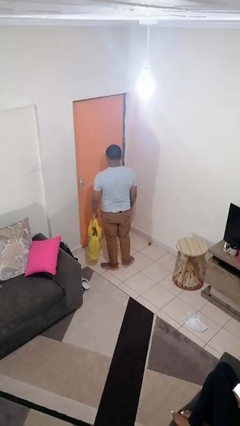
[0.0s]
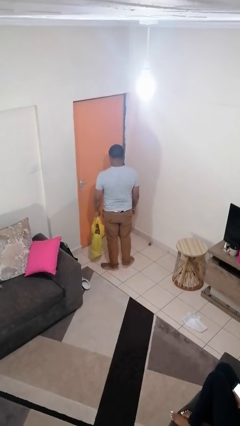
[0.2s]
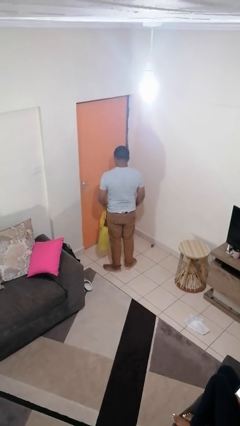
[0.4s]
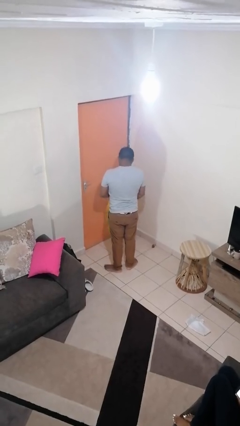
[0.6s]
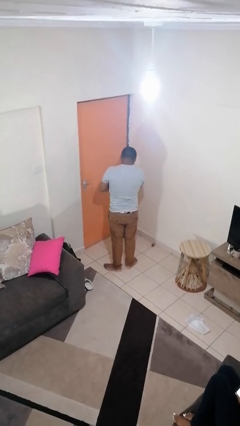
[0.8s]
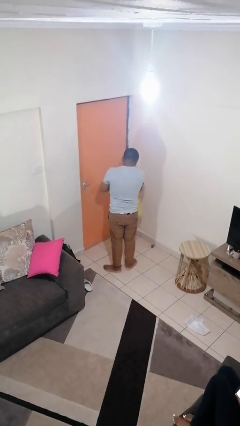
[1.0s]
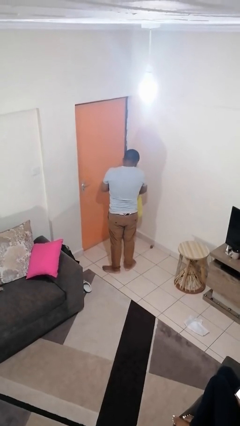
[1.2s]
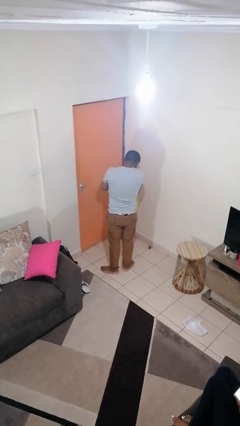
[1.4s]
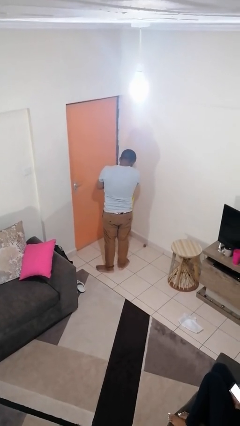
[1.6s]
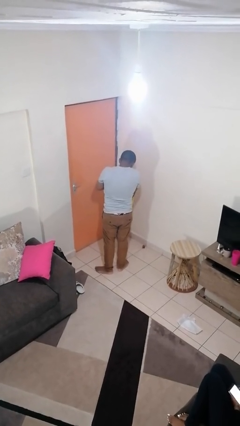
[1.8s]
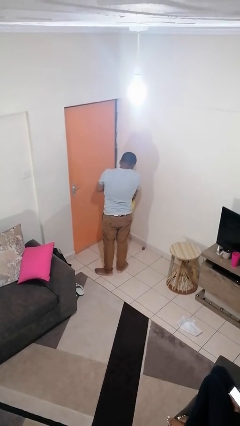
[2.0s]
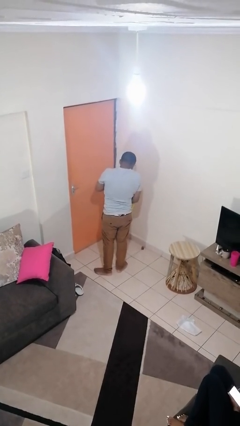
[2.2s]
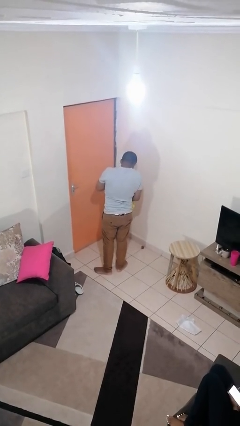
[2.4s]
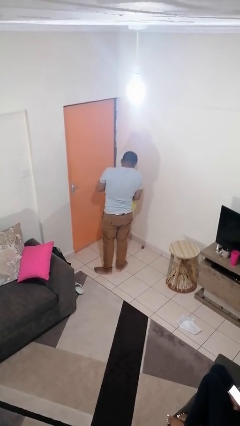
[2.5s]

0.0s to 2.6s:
person searches in bag

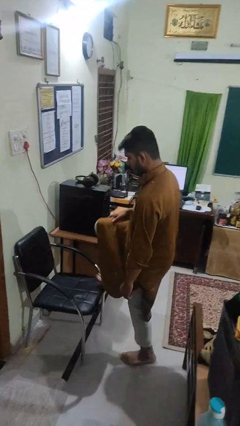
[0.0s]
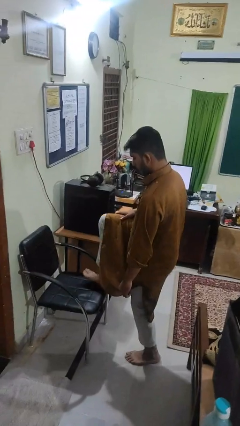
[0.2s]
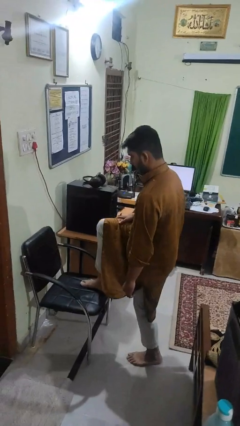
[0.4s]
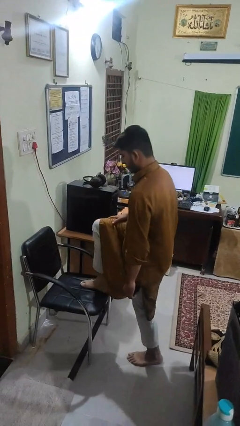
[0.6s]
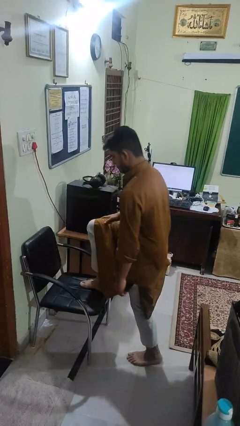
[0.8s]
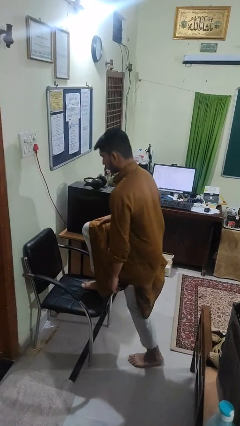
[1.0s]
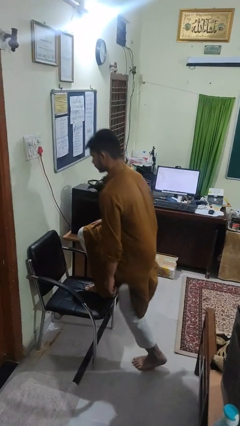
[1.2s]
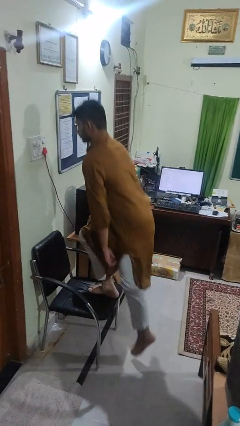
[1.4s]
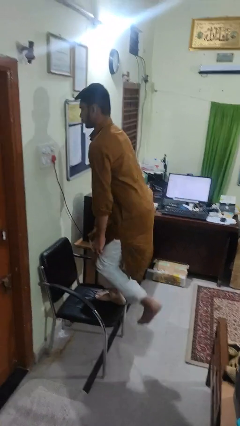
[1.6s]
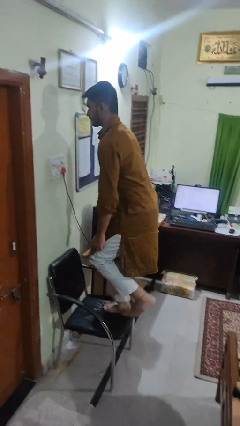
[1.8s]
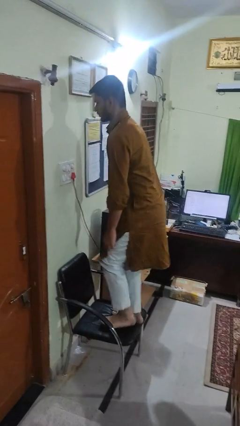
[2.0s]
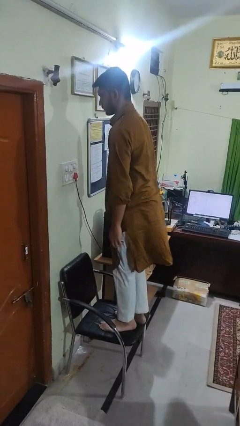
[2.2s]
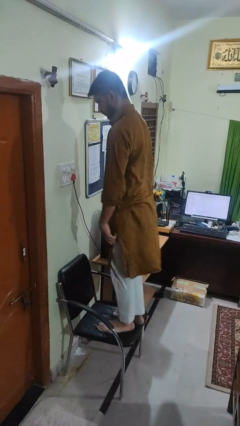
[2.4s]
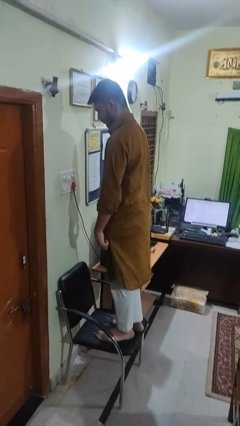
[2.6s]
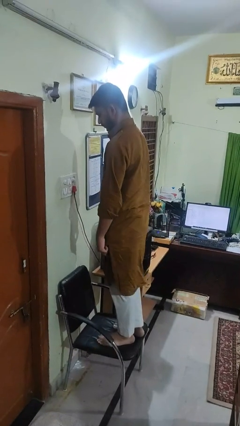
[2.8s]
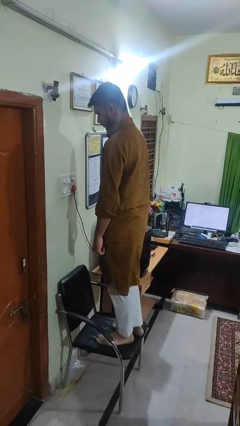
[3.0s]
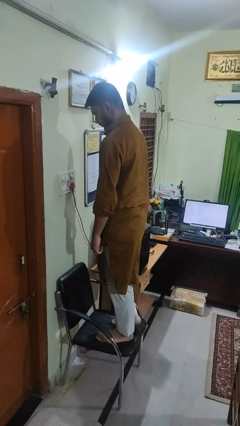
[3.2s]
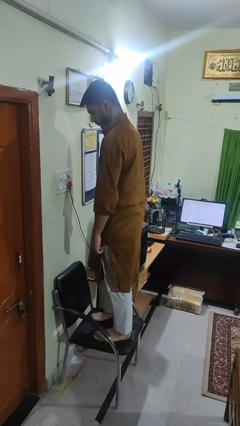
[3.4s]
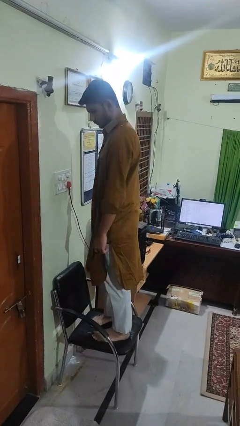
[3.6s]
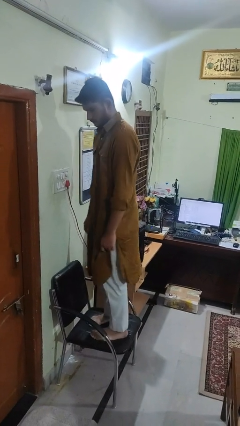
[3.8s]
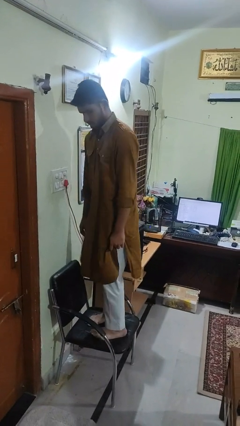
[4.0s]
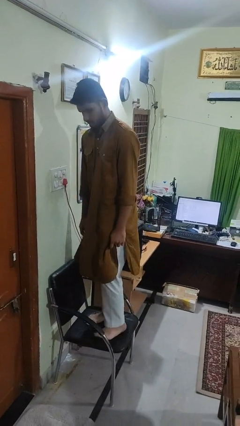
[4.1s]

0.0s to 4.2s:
person climbs on chair

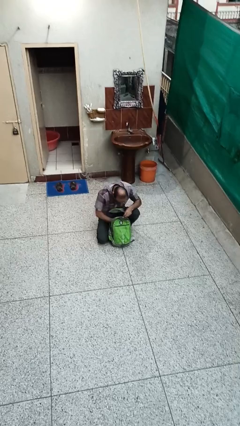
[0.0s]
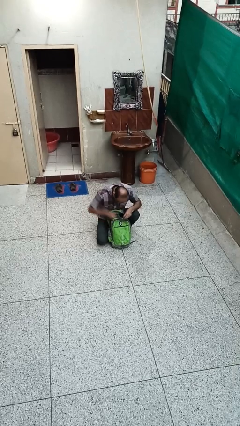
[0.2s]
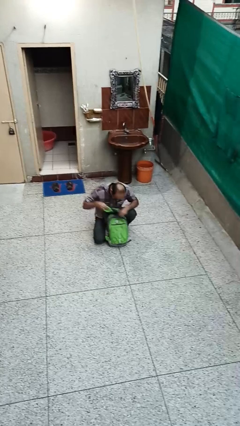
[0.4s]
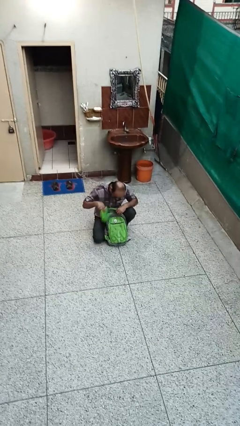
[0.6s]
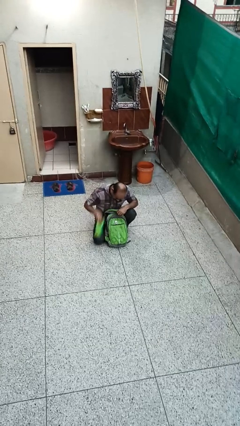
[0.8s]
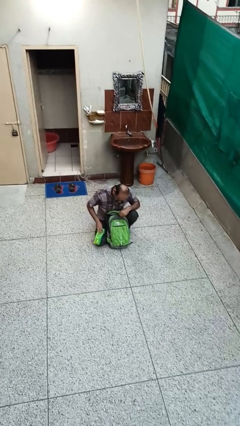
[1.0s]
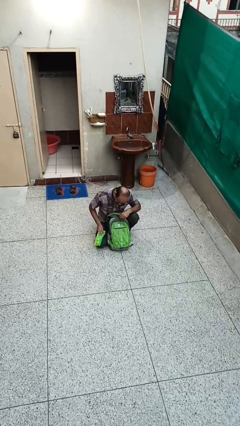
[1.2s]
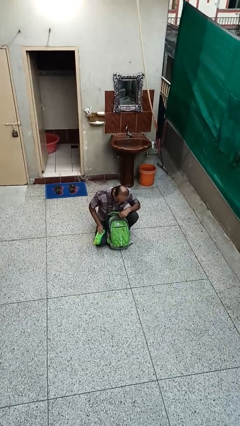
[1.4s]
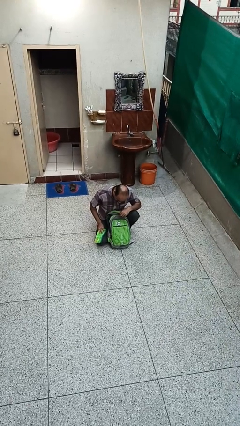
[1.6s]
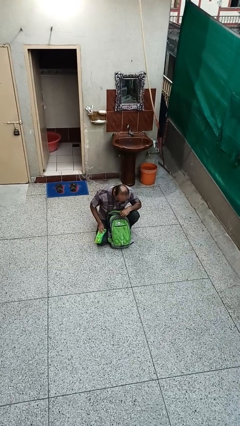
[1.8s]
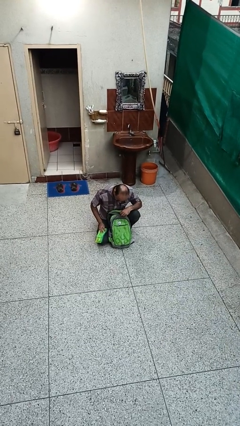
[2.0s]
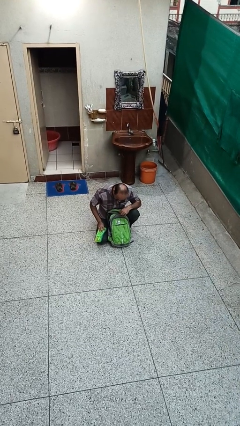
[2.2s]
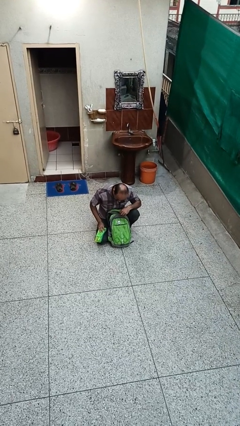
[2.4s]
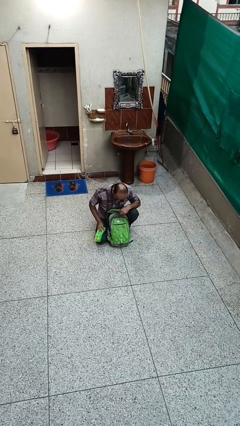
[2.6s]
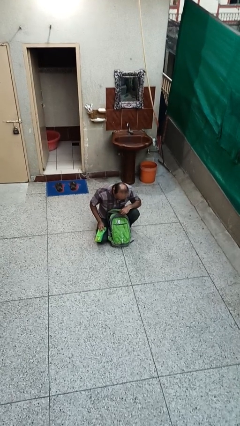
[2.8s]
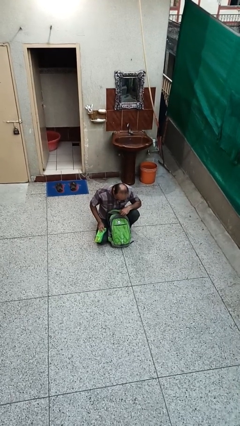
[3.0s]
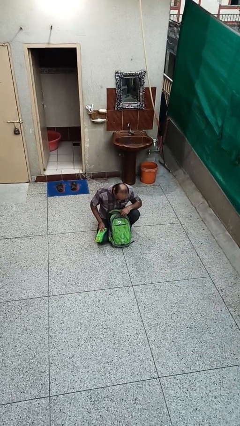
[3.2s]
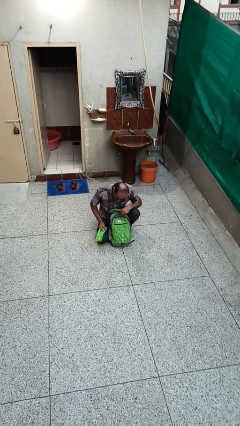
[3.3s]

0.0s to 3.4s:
person takes object from backpack

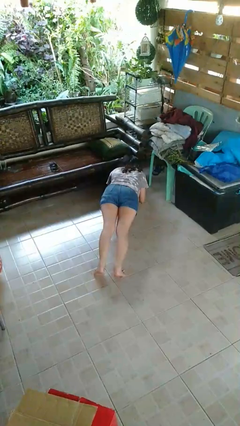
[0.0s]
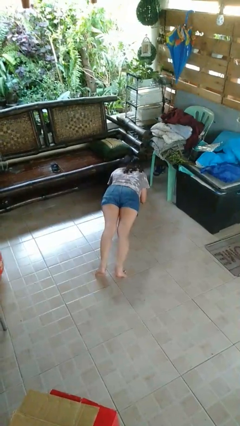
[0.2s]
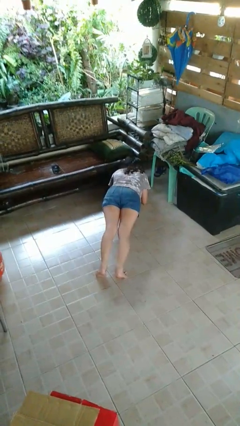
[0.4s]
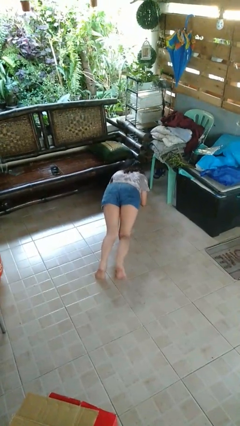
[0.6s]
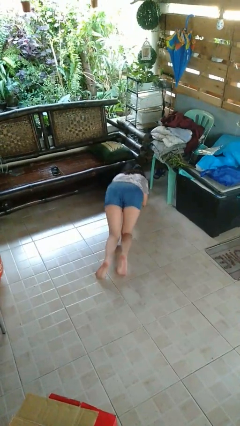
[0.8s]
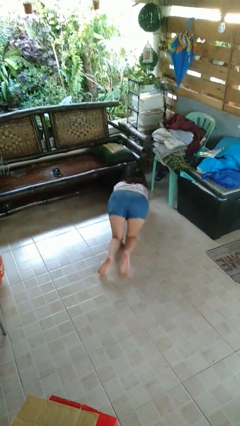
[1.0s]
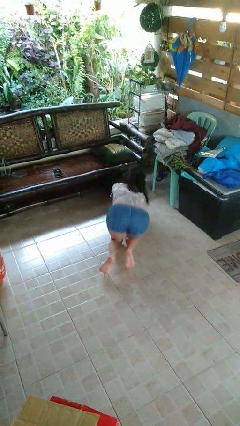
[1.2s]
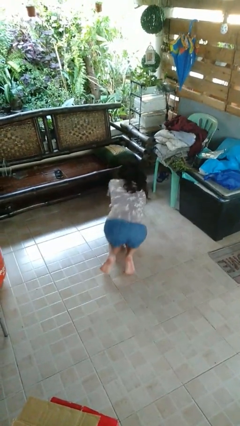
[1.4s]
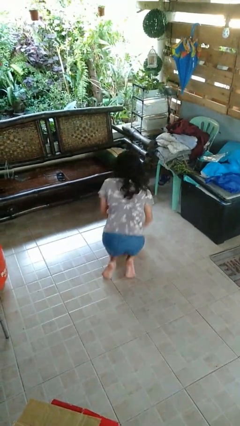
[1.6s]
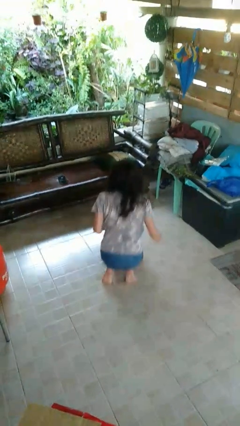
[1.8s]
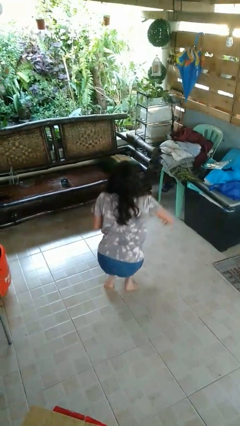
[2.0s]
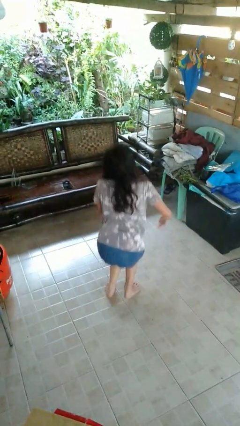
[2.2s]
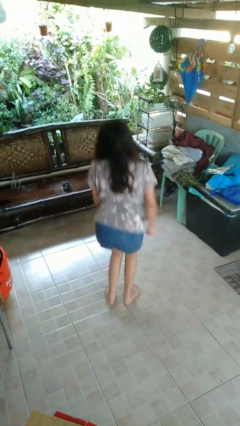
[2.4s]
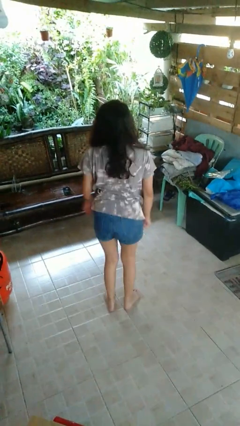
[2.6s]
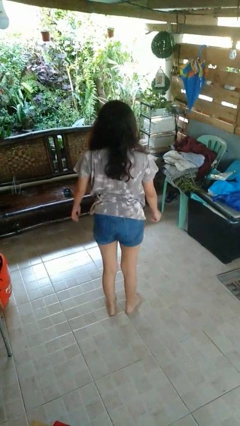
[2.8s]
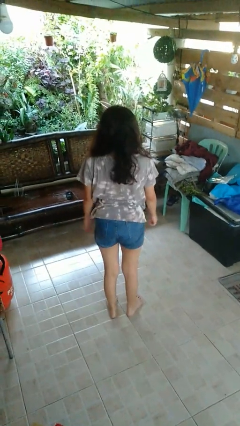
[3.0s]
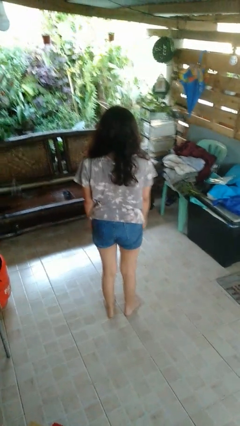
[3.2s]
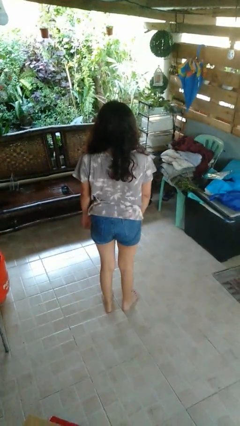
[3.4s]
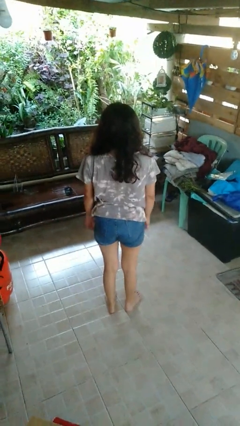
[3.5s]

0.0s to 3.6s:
person stands up from floor

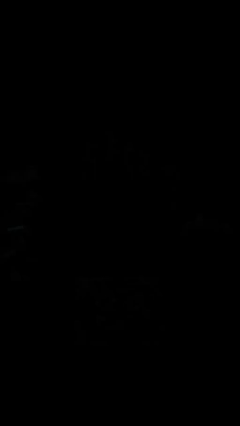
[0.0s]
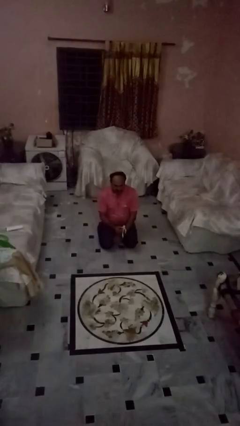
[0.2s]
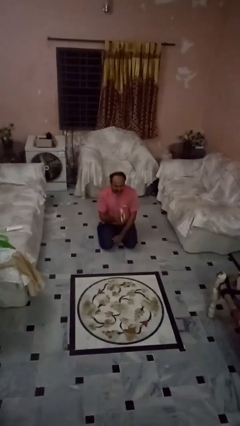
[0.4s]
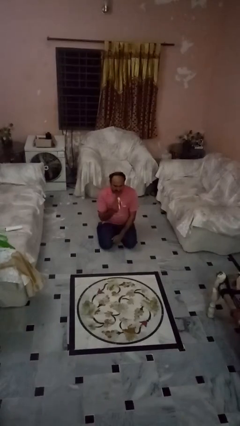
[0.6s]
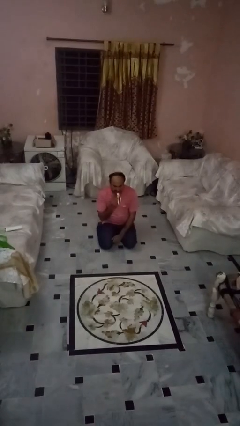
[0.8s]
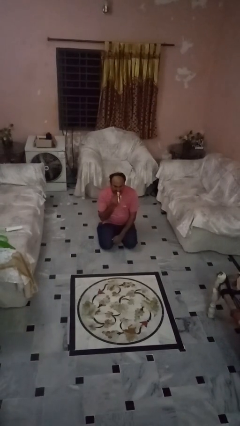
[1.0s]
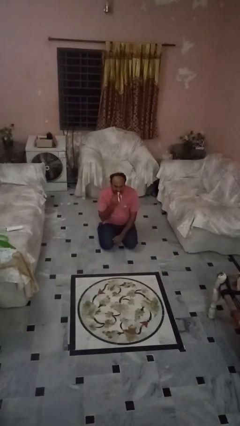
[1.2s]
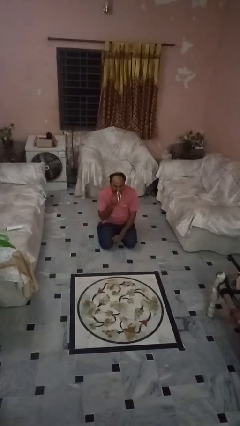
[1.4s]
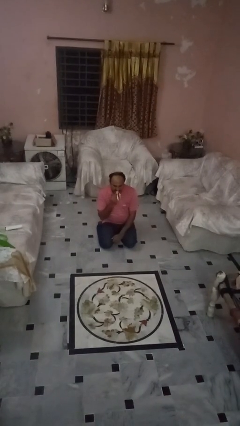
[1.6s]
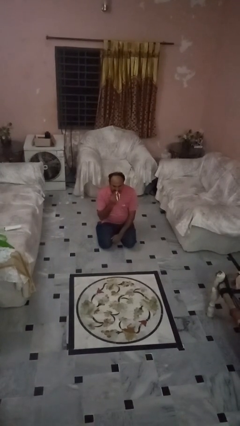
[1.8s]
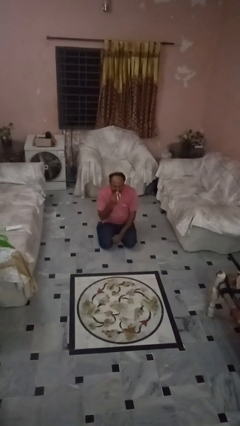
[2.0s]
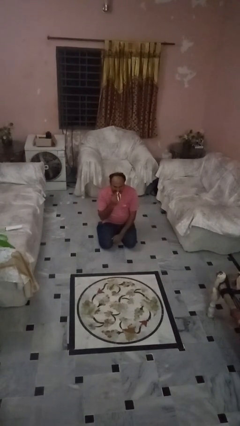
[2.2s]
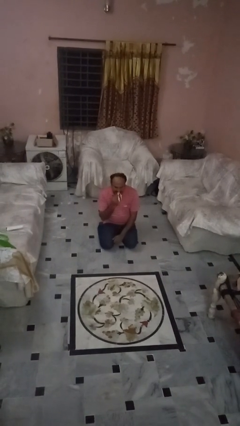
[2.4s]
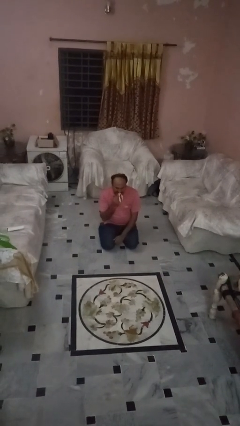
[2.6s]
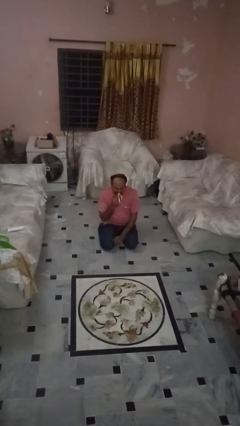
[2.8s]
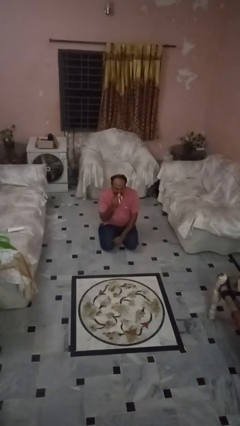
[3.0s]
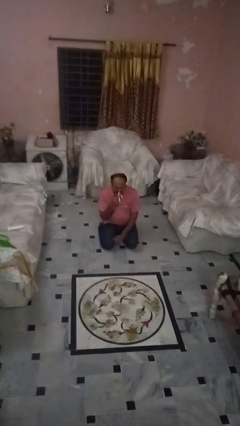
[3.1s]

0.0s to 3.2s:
person eats banana

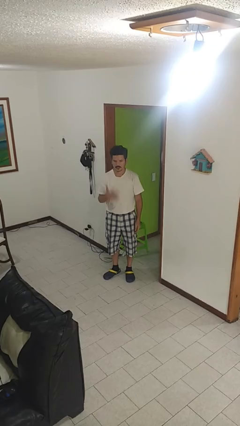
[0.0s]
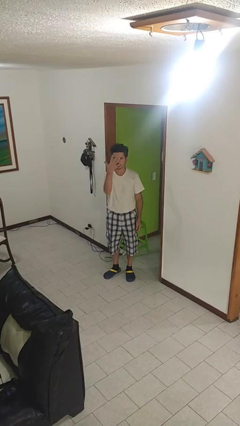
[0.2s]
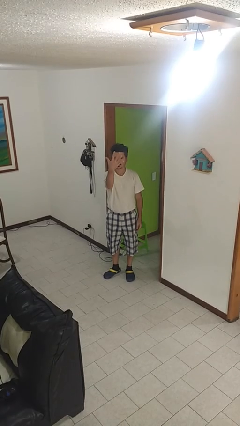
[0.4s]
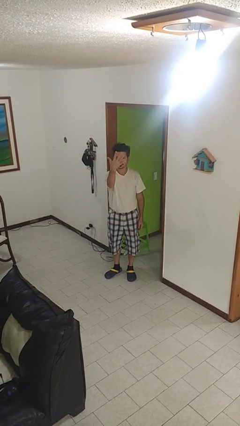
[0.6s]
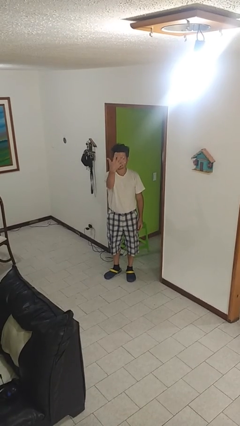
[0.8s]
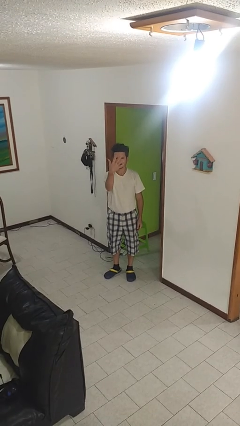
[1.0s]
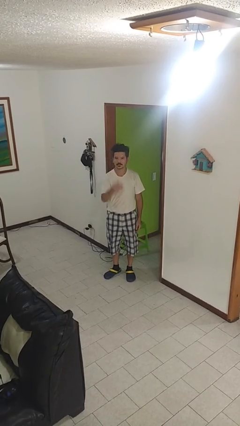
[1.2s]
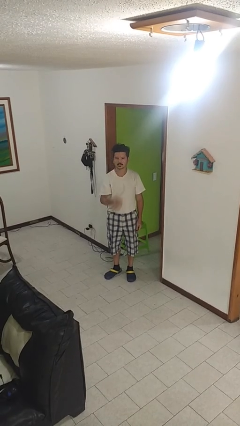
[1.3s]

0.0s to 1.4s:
person gestures number five
